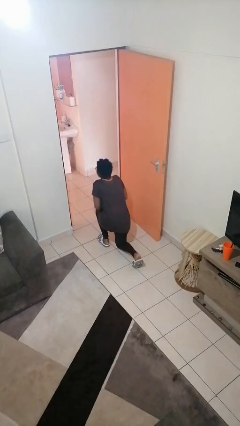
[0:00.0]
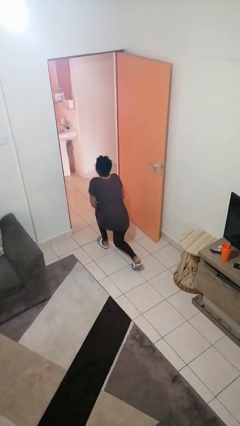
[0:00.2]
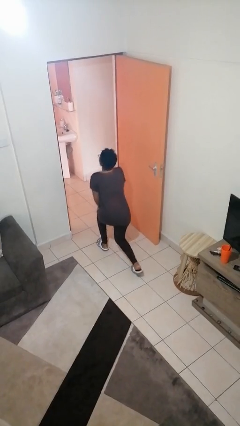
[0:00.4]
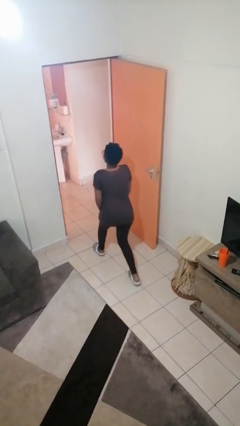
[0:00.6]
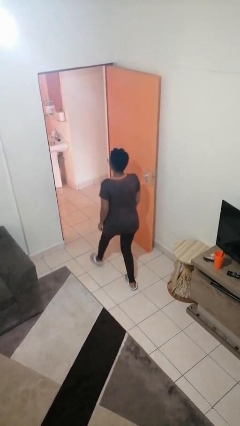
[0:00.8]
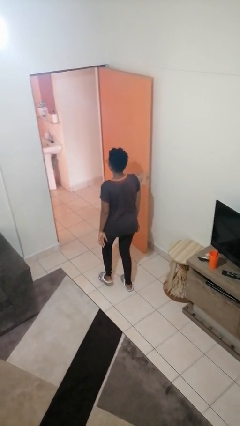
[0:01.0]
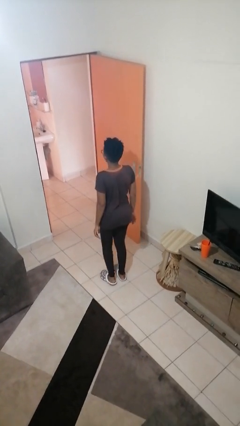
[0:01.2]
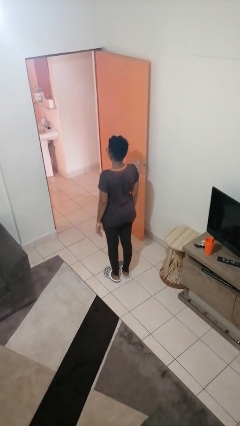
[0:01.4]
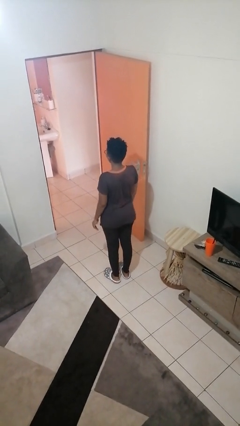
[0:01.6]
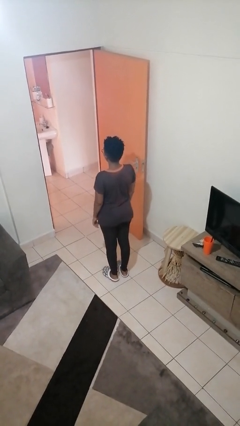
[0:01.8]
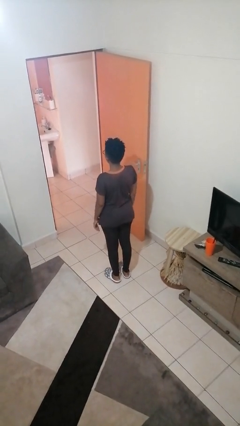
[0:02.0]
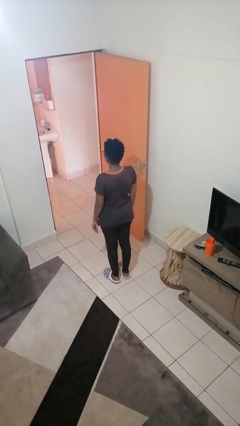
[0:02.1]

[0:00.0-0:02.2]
person stands up from floor

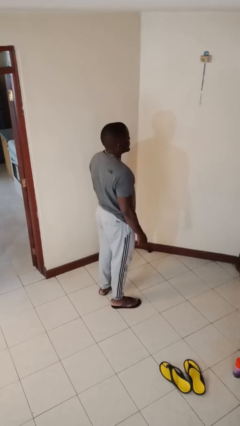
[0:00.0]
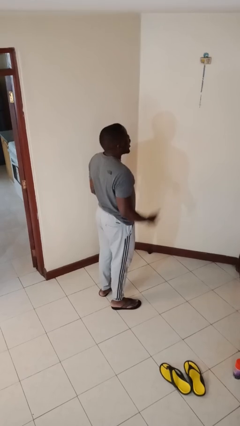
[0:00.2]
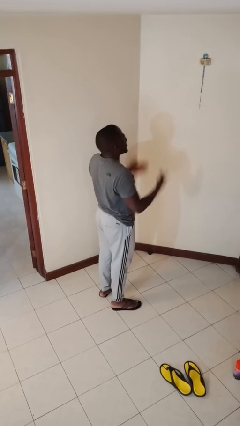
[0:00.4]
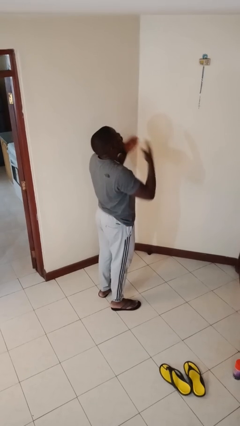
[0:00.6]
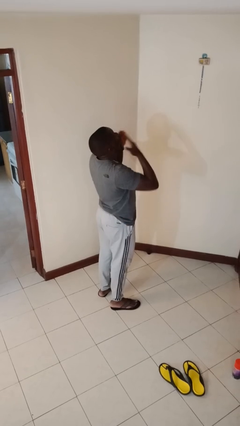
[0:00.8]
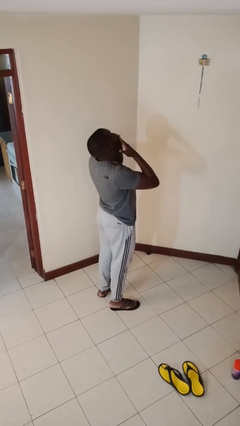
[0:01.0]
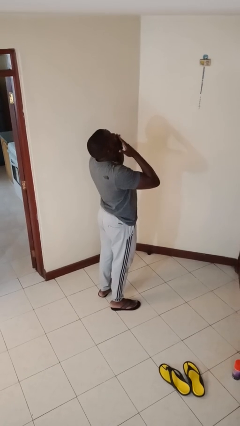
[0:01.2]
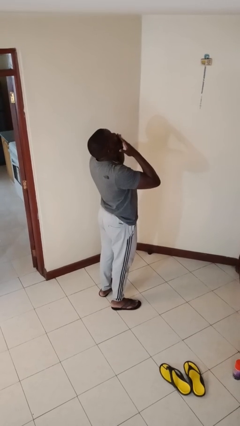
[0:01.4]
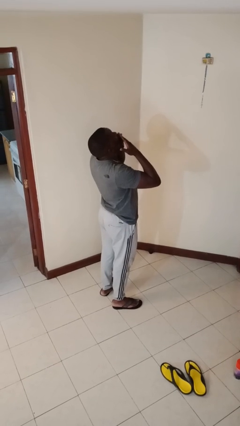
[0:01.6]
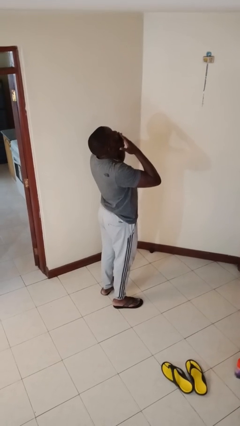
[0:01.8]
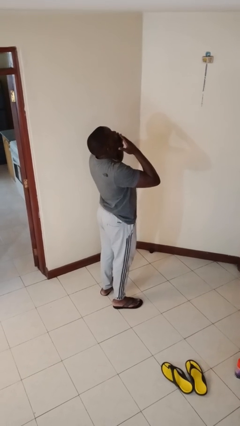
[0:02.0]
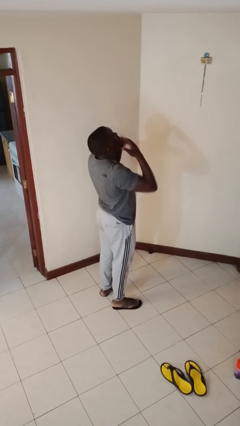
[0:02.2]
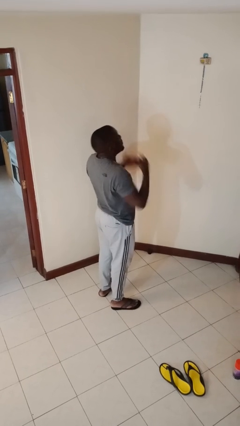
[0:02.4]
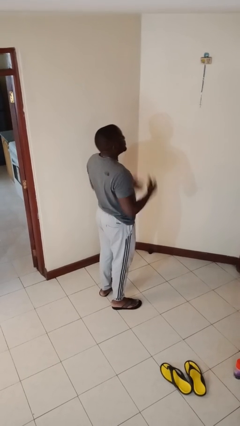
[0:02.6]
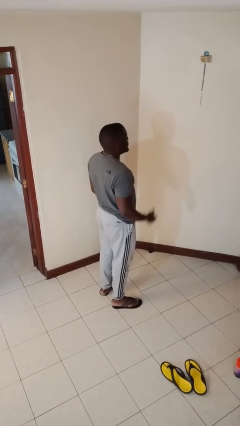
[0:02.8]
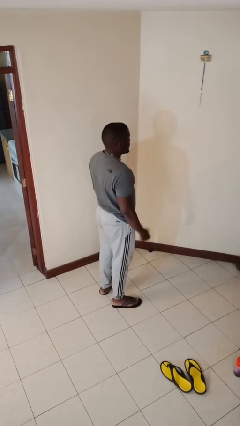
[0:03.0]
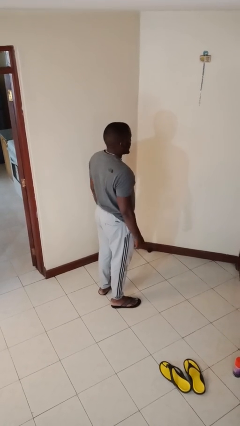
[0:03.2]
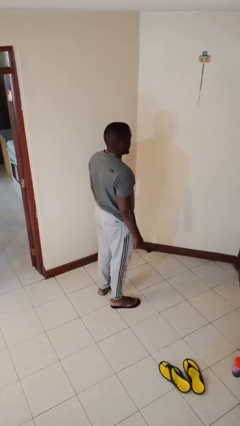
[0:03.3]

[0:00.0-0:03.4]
person yawns

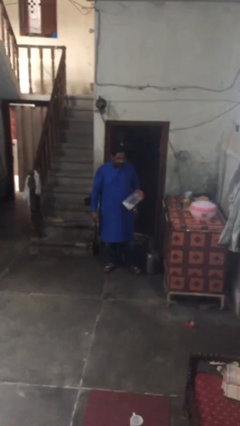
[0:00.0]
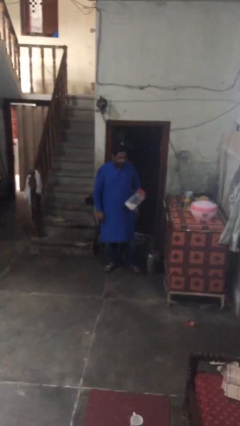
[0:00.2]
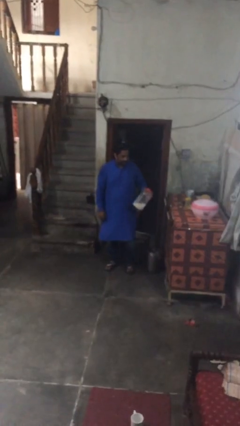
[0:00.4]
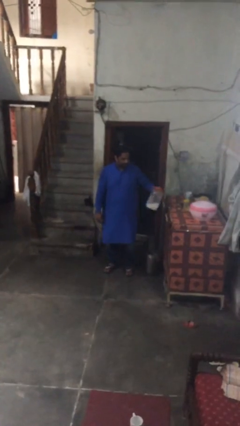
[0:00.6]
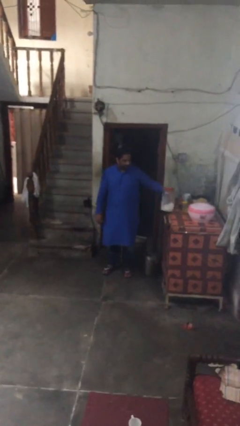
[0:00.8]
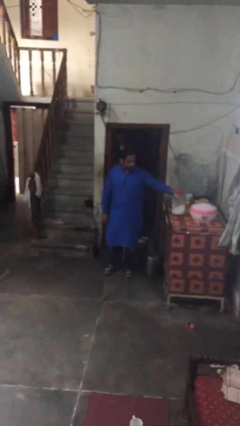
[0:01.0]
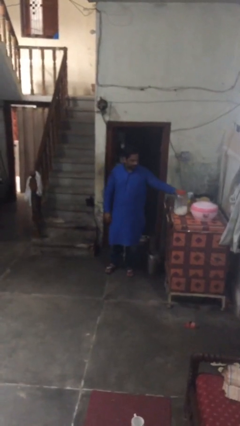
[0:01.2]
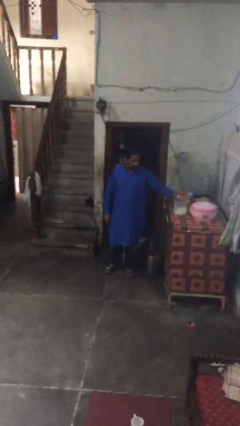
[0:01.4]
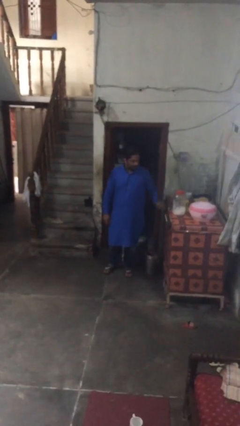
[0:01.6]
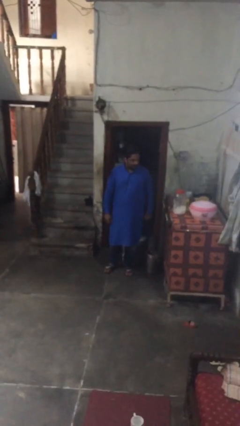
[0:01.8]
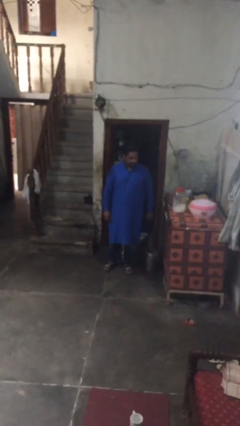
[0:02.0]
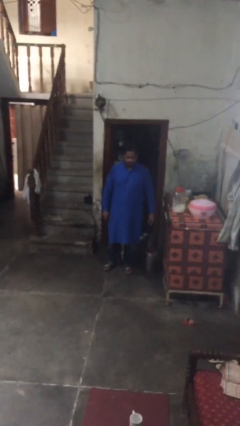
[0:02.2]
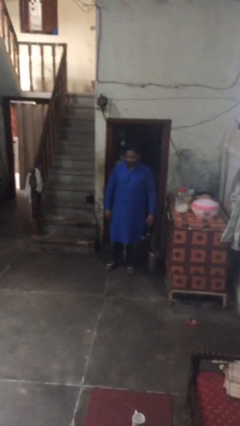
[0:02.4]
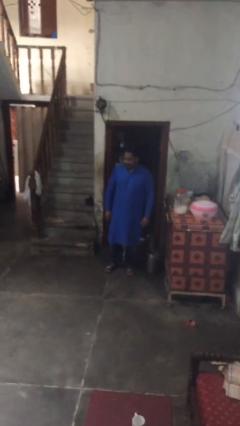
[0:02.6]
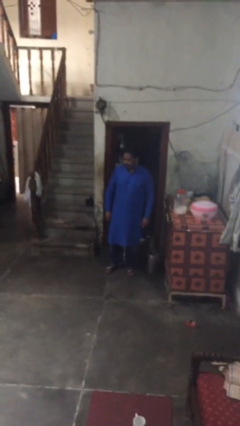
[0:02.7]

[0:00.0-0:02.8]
person puts down object on table

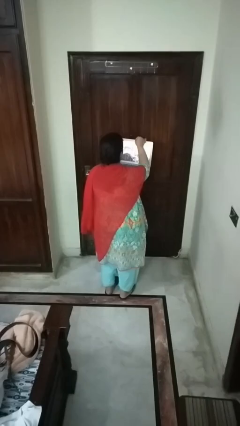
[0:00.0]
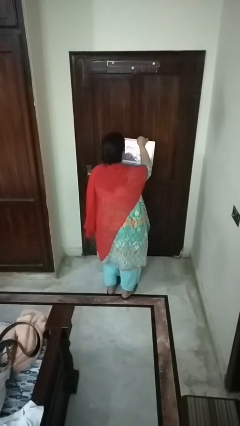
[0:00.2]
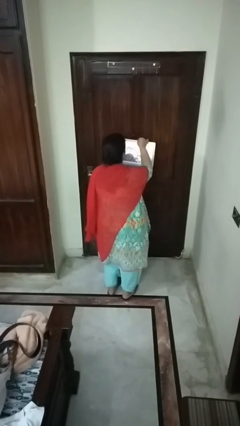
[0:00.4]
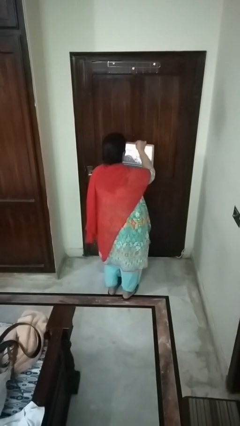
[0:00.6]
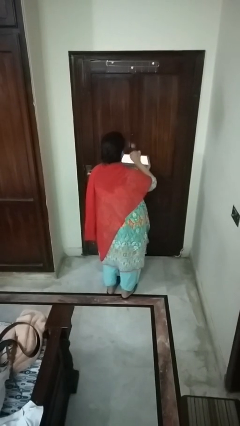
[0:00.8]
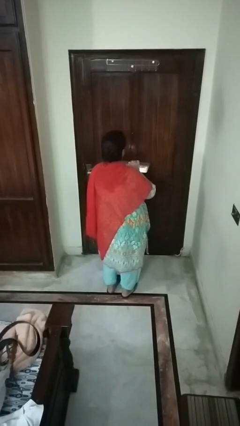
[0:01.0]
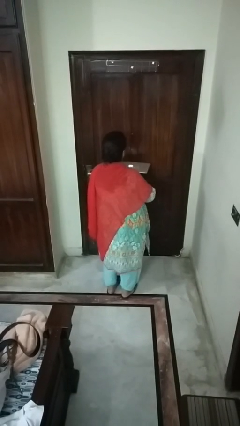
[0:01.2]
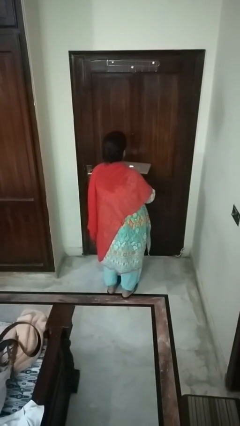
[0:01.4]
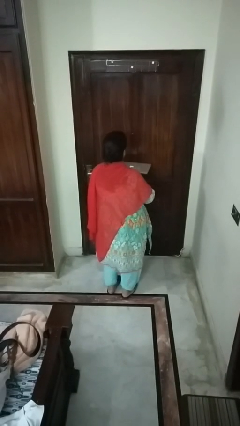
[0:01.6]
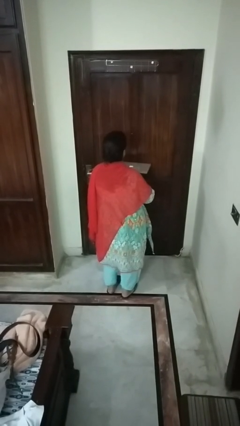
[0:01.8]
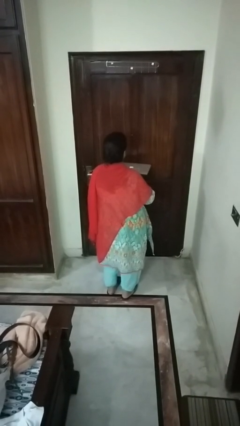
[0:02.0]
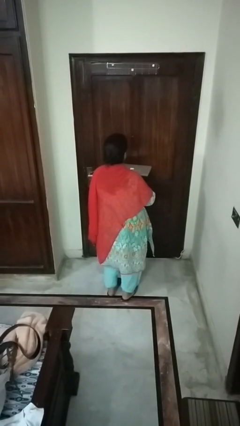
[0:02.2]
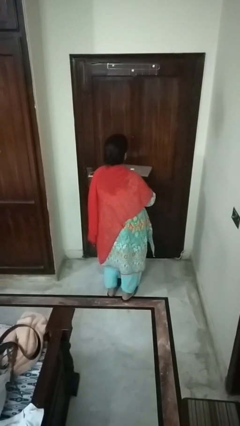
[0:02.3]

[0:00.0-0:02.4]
person closes laptop

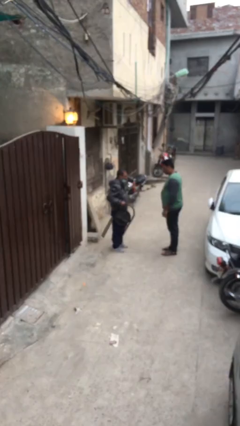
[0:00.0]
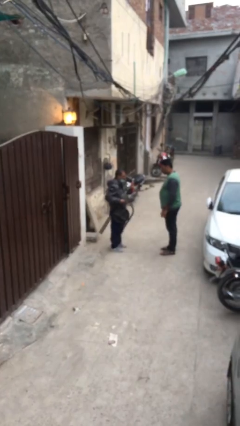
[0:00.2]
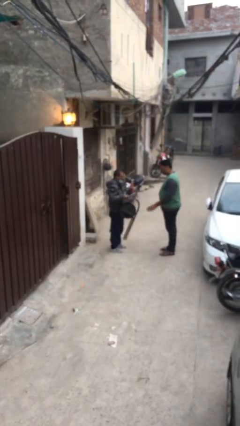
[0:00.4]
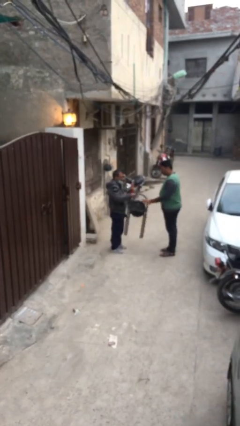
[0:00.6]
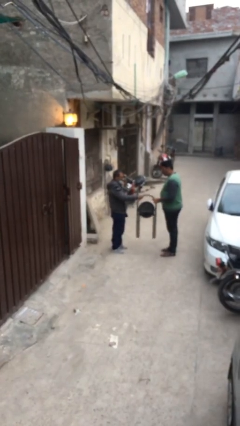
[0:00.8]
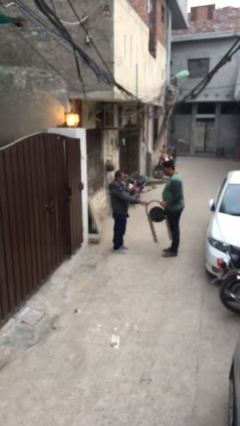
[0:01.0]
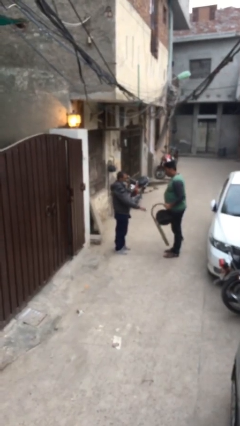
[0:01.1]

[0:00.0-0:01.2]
person transfers object to person

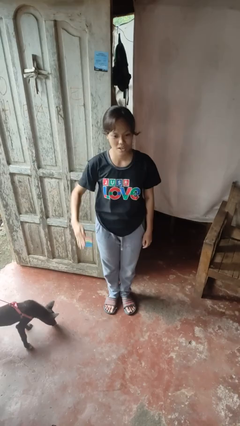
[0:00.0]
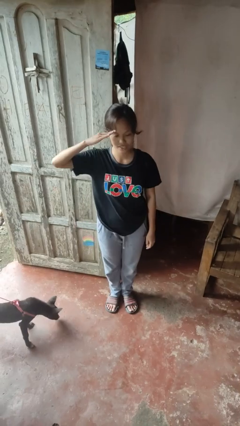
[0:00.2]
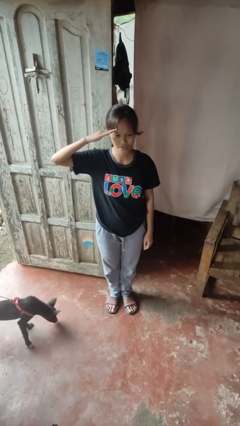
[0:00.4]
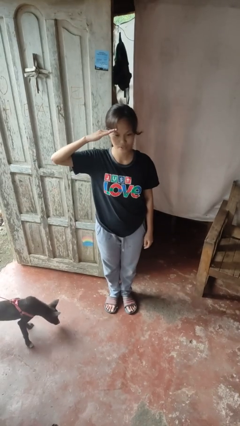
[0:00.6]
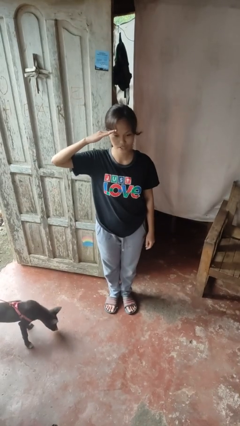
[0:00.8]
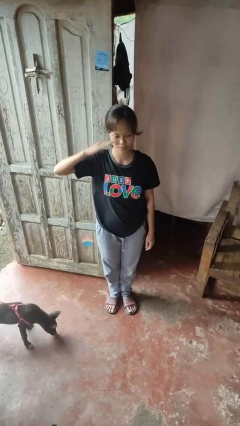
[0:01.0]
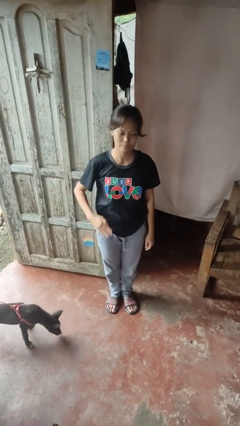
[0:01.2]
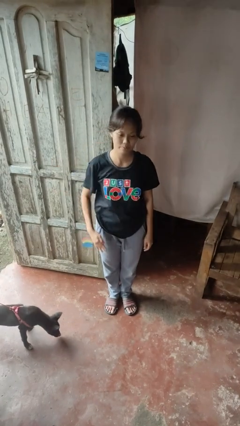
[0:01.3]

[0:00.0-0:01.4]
person salutes

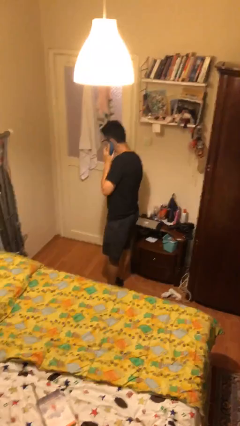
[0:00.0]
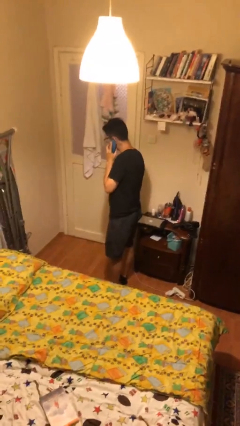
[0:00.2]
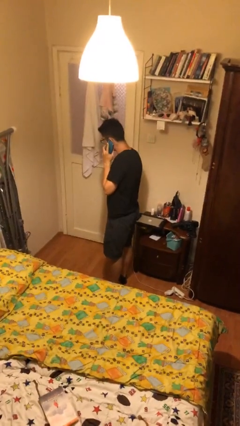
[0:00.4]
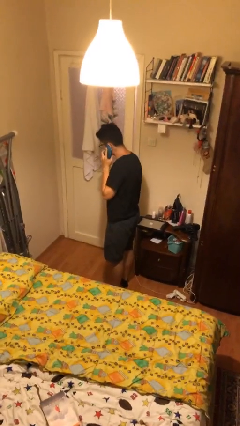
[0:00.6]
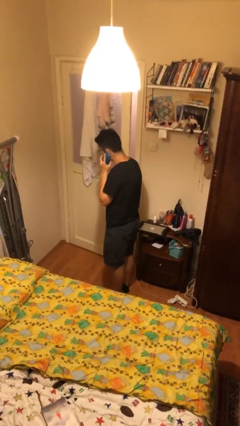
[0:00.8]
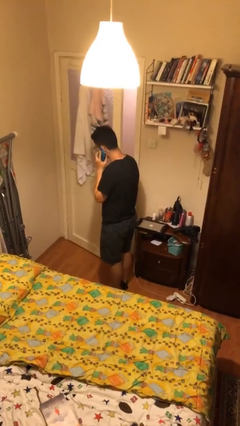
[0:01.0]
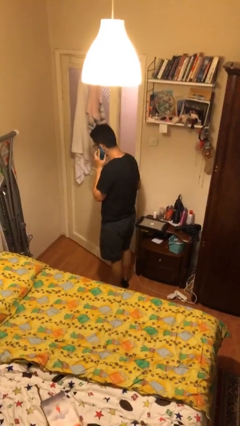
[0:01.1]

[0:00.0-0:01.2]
person opens facility door

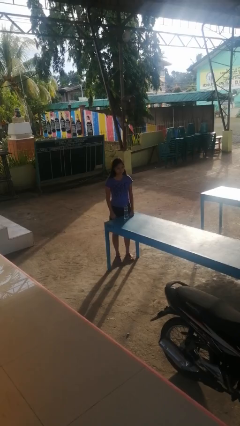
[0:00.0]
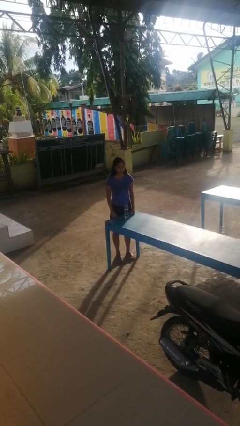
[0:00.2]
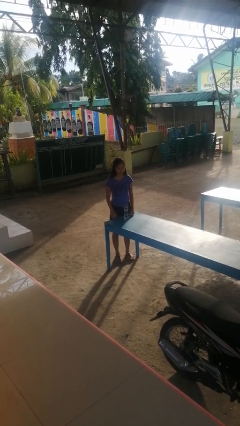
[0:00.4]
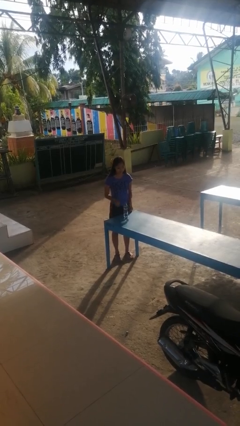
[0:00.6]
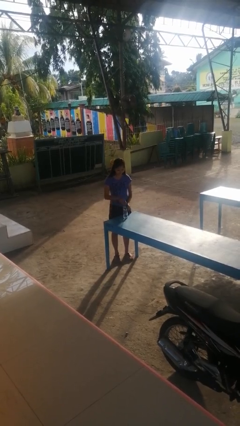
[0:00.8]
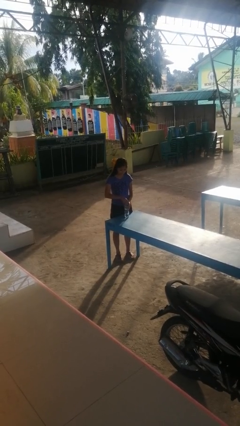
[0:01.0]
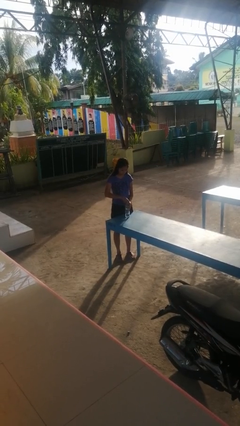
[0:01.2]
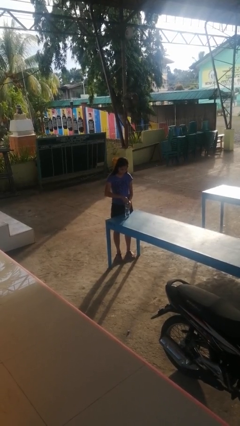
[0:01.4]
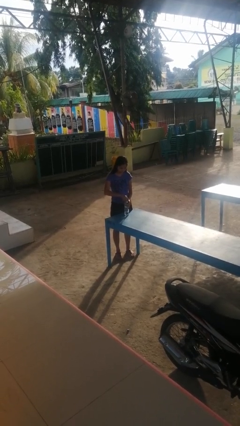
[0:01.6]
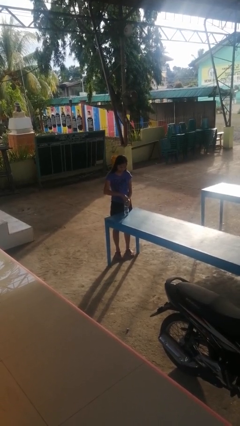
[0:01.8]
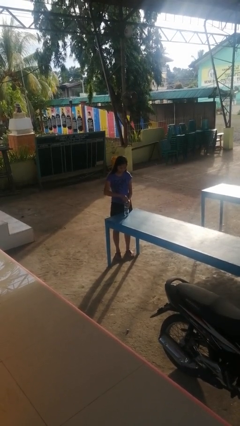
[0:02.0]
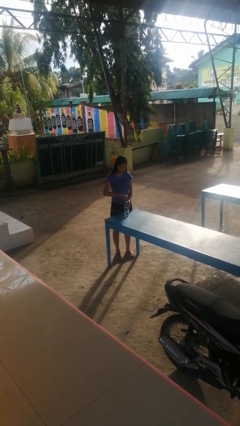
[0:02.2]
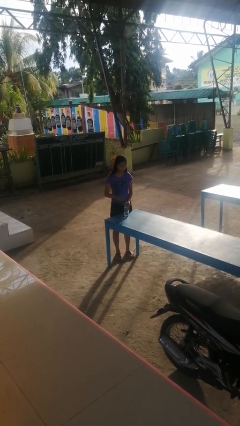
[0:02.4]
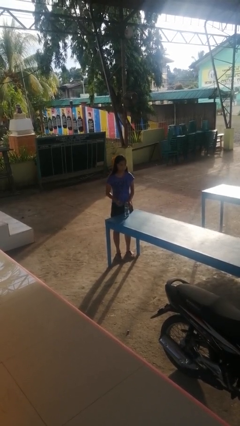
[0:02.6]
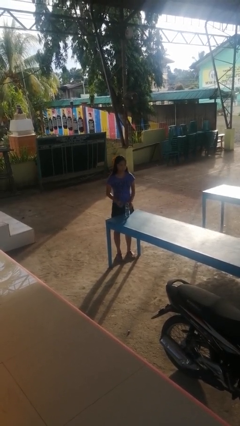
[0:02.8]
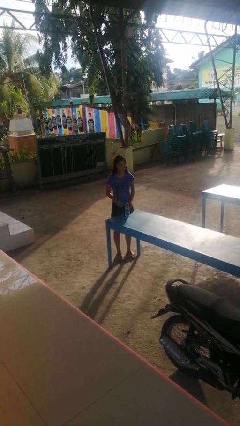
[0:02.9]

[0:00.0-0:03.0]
person unscrews lid from bottle
